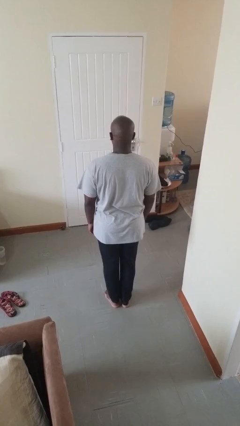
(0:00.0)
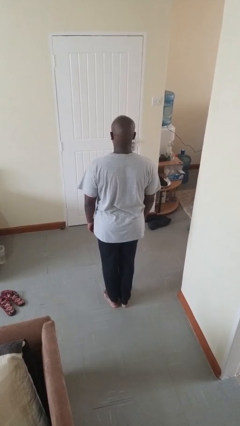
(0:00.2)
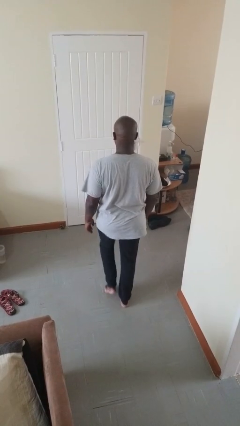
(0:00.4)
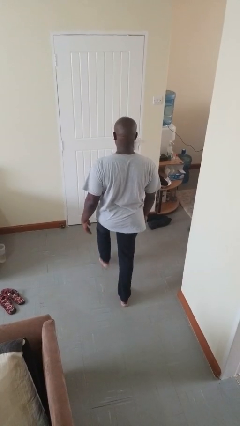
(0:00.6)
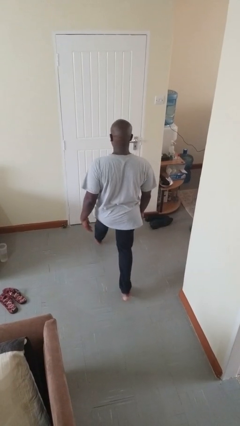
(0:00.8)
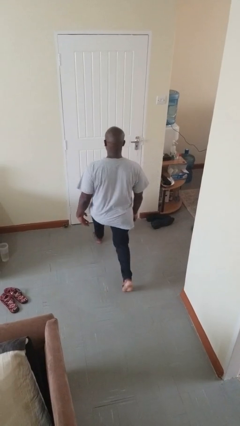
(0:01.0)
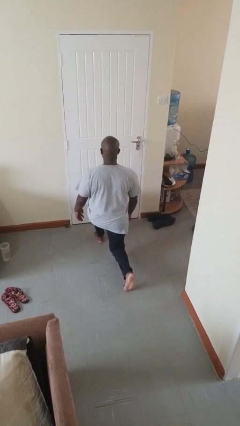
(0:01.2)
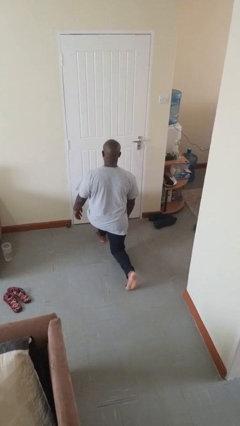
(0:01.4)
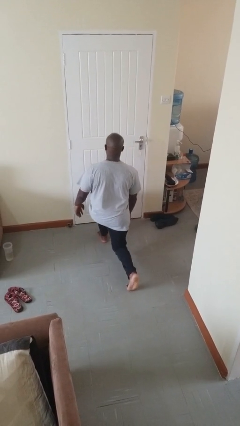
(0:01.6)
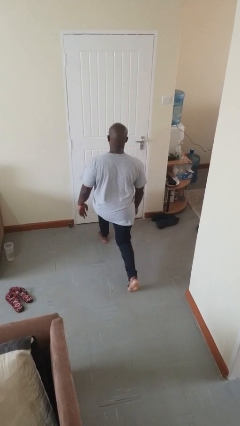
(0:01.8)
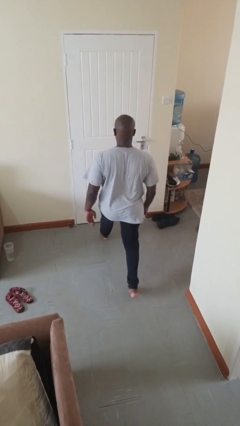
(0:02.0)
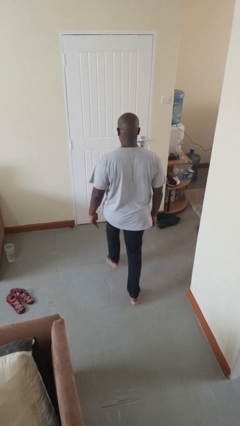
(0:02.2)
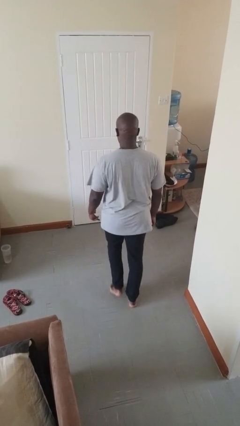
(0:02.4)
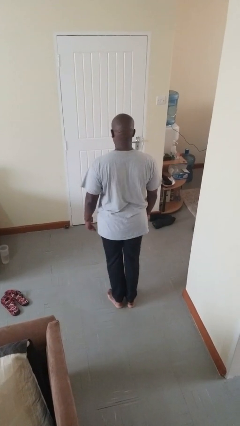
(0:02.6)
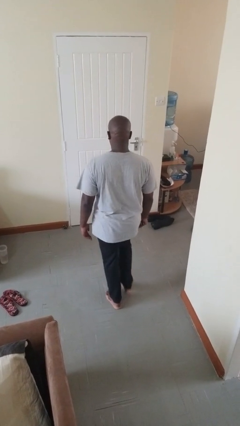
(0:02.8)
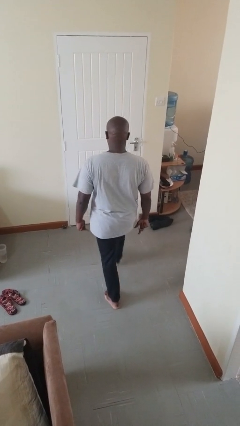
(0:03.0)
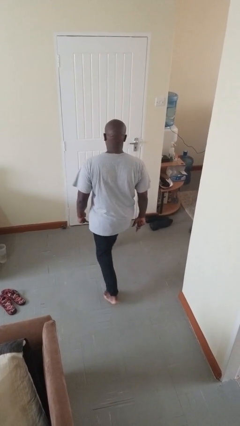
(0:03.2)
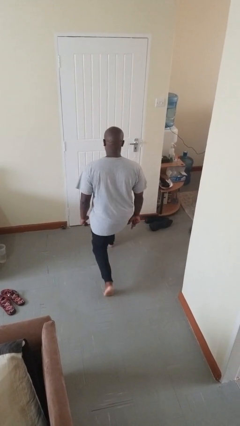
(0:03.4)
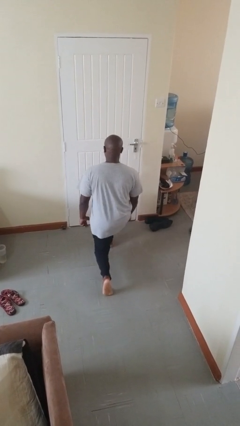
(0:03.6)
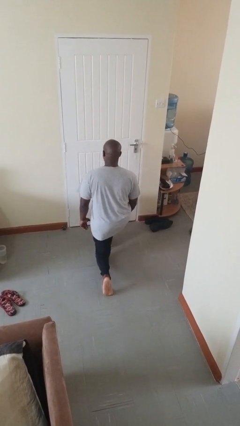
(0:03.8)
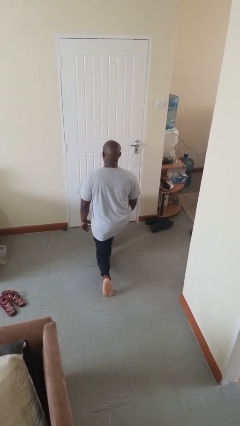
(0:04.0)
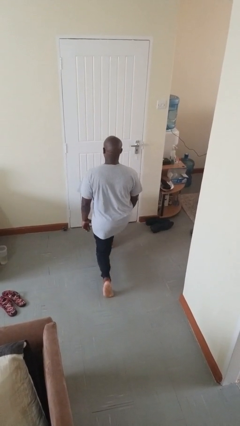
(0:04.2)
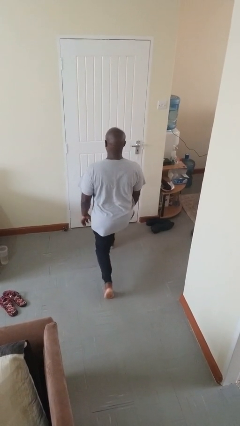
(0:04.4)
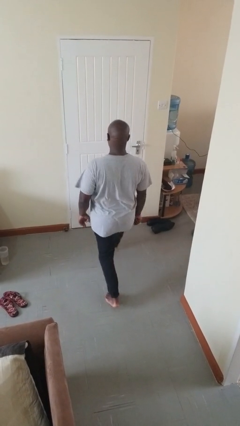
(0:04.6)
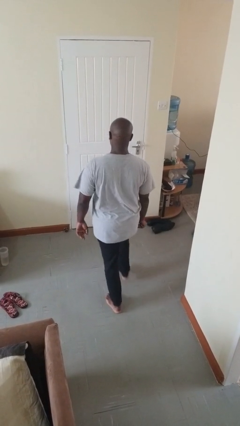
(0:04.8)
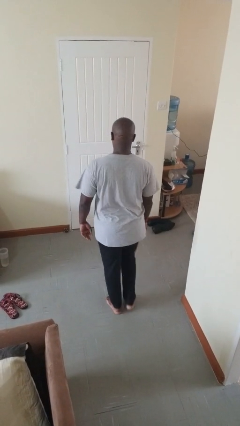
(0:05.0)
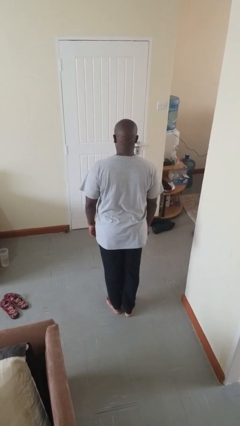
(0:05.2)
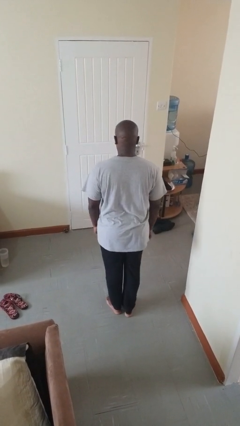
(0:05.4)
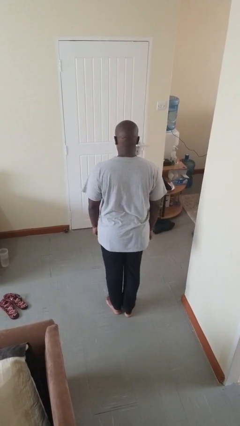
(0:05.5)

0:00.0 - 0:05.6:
person exercises with lunges

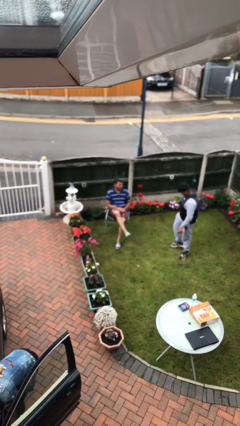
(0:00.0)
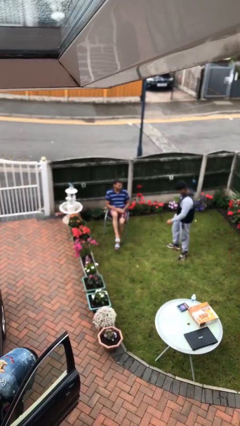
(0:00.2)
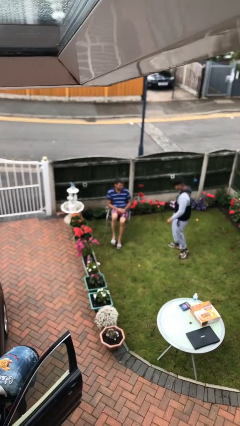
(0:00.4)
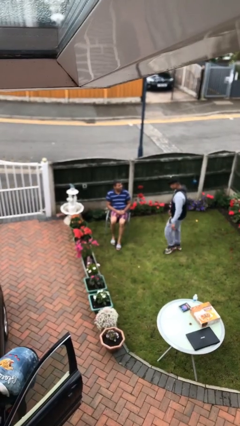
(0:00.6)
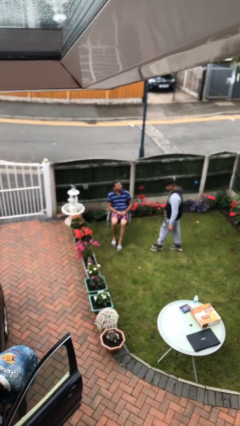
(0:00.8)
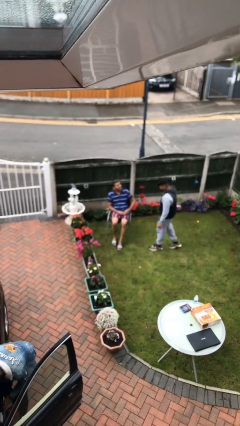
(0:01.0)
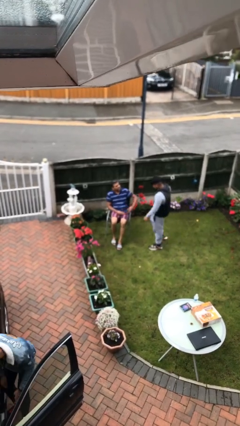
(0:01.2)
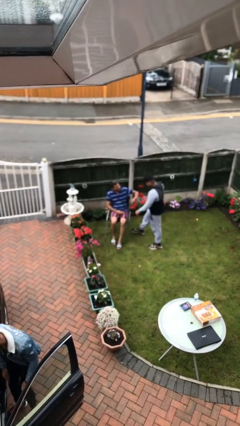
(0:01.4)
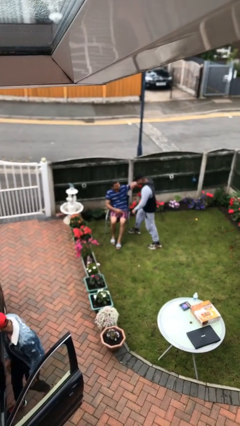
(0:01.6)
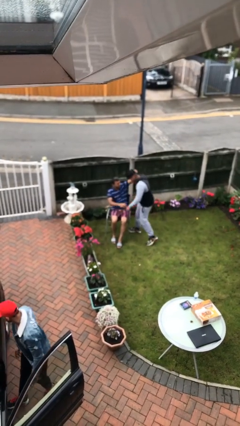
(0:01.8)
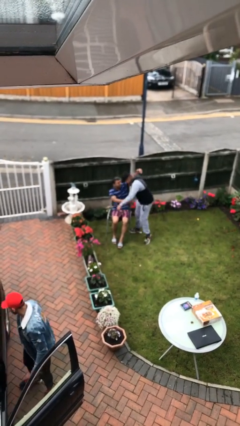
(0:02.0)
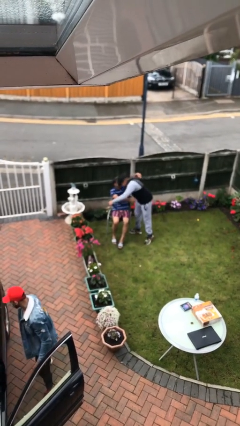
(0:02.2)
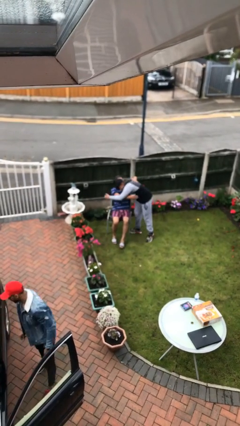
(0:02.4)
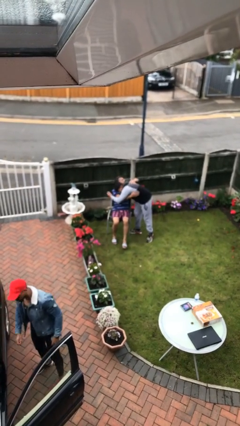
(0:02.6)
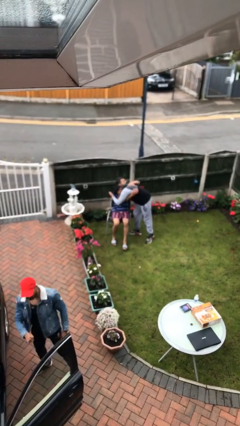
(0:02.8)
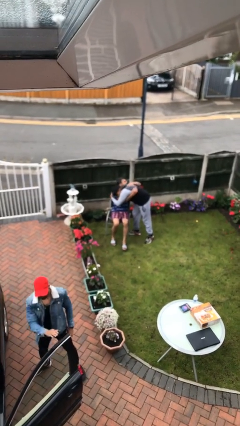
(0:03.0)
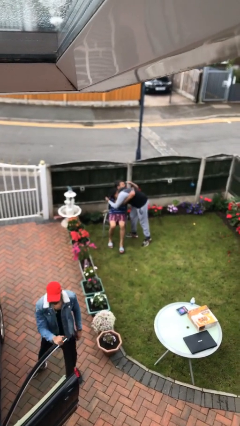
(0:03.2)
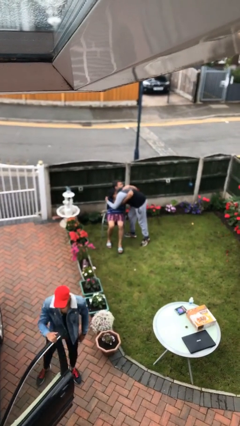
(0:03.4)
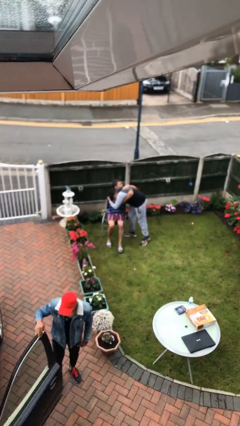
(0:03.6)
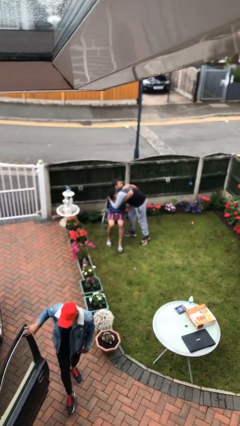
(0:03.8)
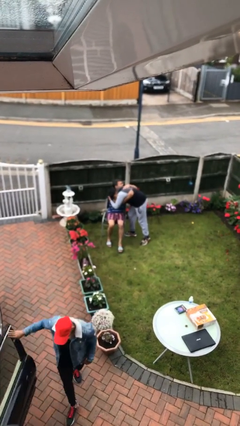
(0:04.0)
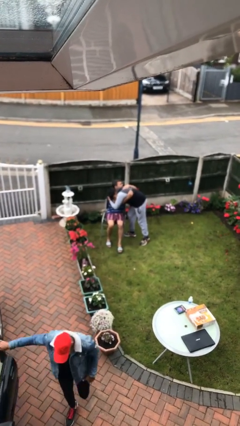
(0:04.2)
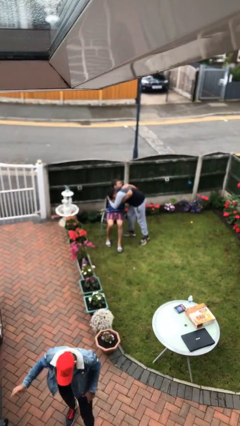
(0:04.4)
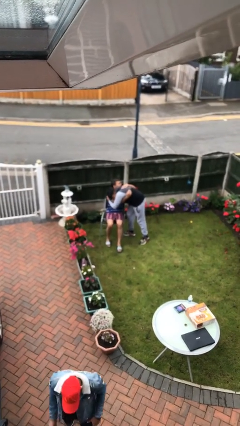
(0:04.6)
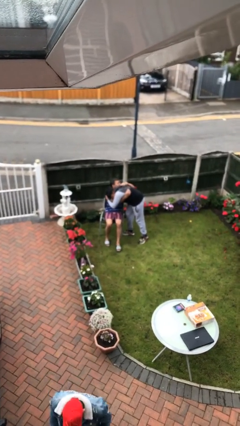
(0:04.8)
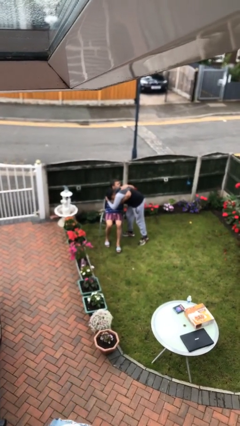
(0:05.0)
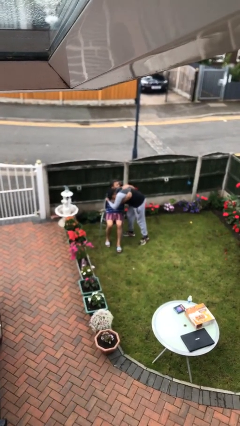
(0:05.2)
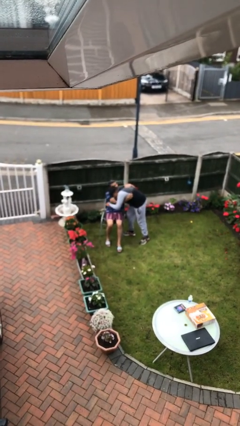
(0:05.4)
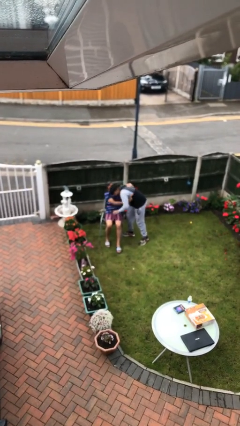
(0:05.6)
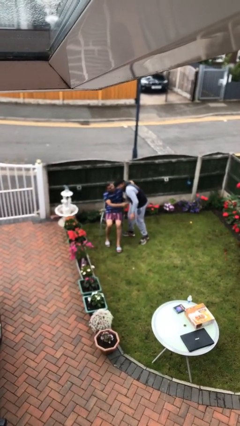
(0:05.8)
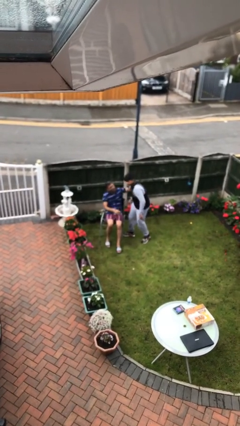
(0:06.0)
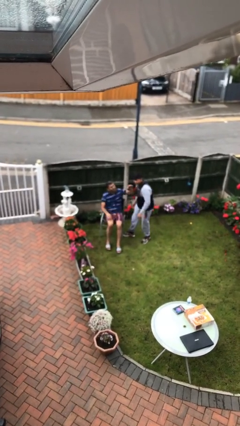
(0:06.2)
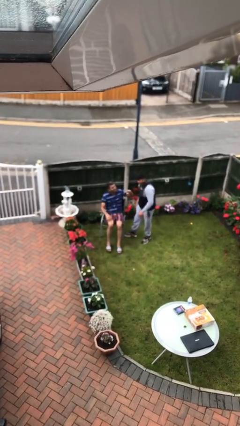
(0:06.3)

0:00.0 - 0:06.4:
person embraces person

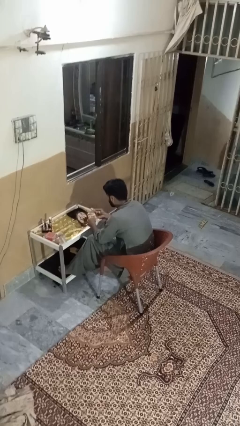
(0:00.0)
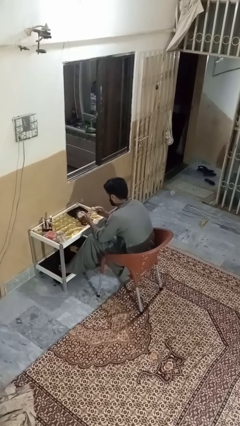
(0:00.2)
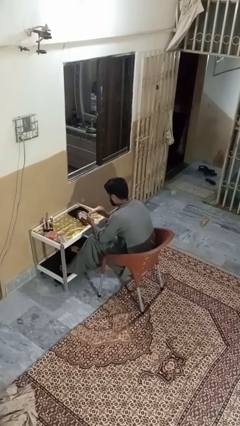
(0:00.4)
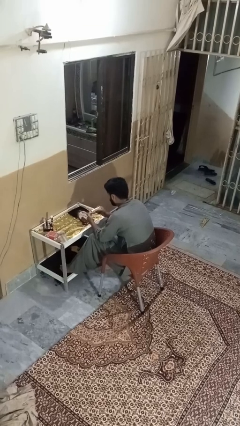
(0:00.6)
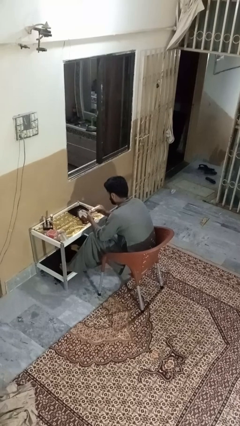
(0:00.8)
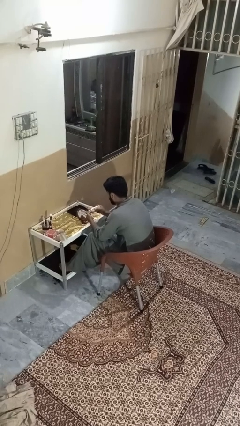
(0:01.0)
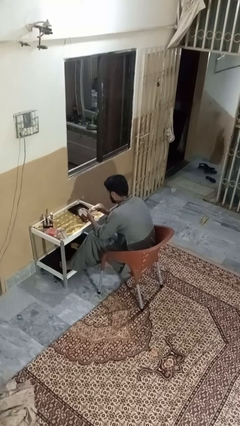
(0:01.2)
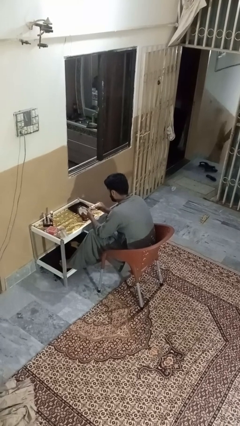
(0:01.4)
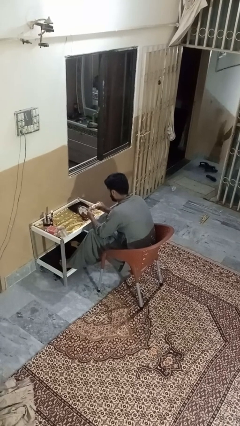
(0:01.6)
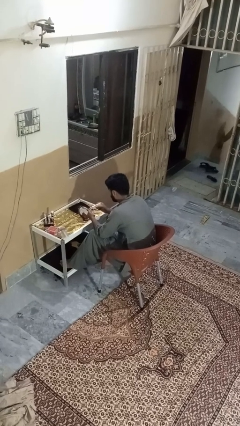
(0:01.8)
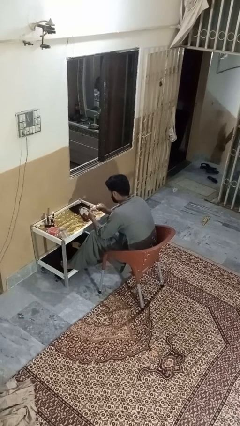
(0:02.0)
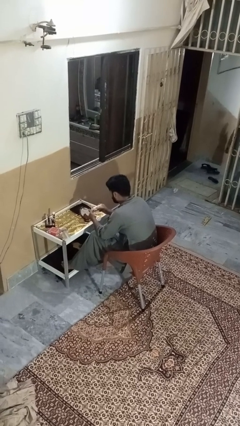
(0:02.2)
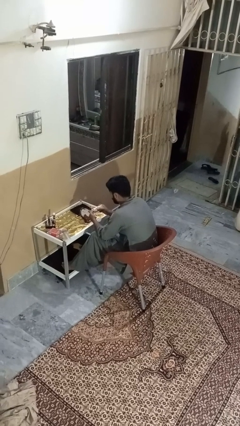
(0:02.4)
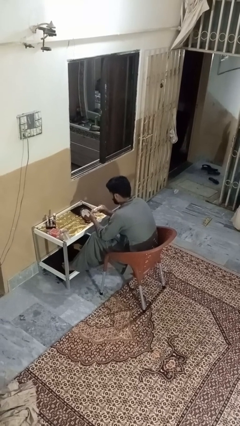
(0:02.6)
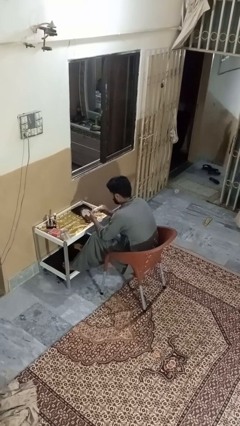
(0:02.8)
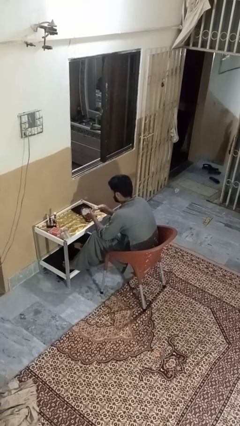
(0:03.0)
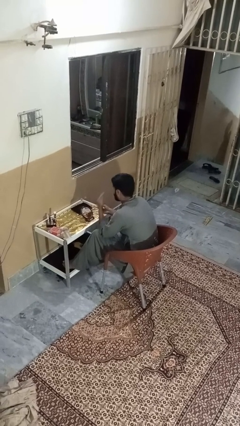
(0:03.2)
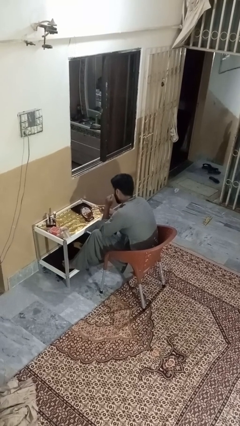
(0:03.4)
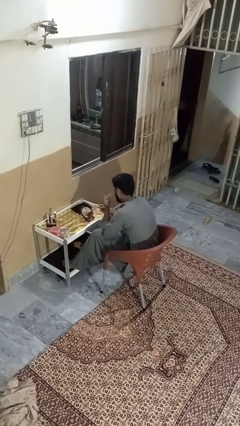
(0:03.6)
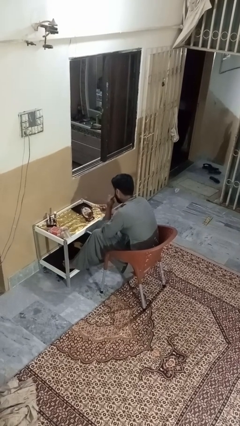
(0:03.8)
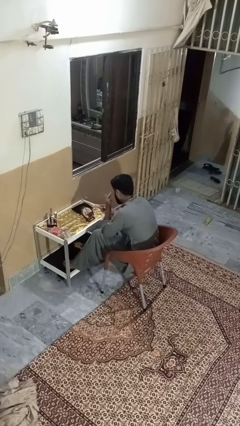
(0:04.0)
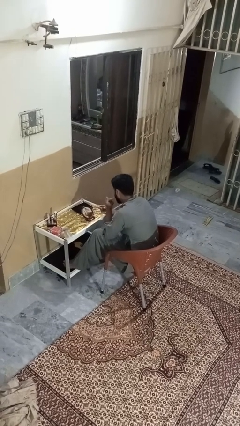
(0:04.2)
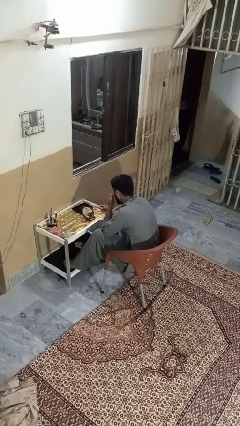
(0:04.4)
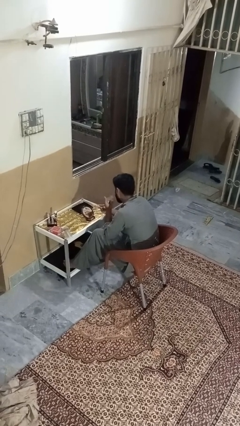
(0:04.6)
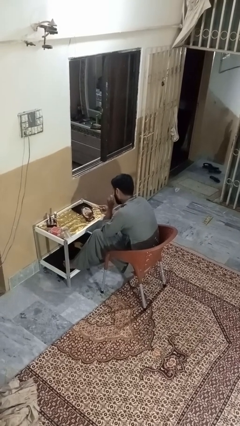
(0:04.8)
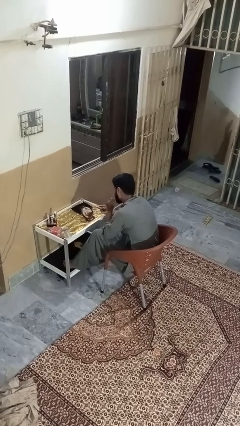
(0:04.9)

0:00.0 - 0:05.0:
person applies foundation makeup

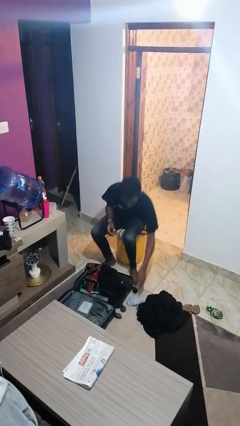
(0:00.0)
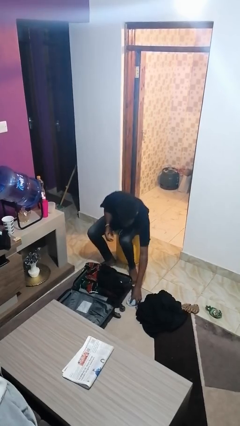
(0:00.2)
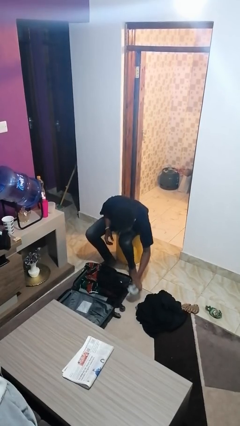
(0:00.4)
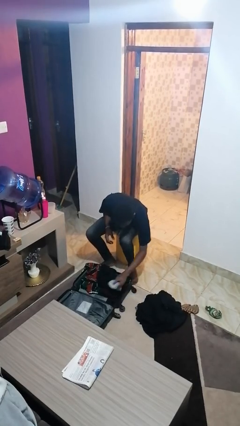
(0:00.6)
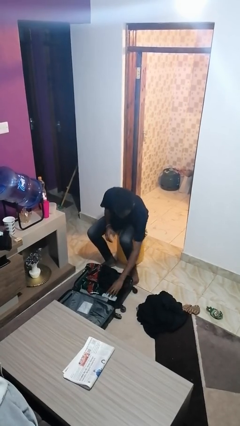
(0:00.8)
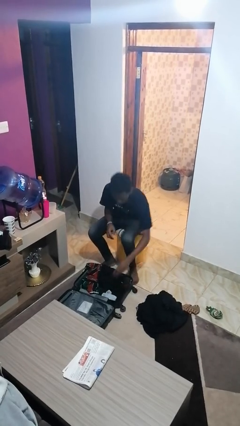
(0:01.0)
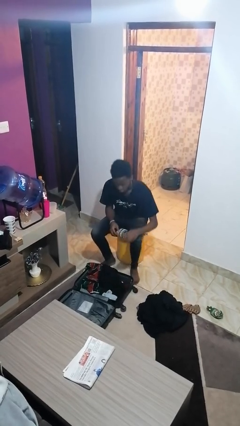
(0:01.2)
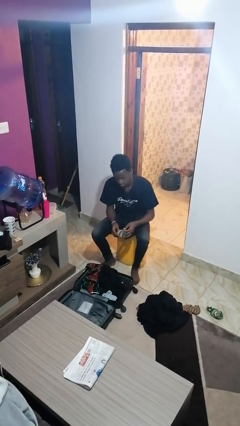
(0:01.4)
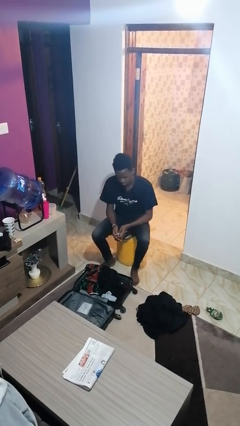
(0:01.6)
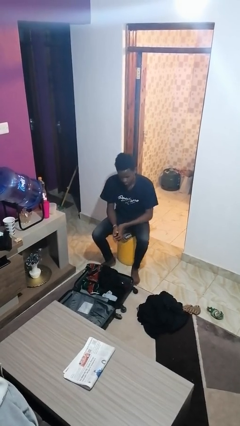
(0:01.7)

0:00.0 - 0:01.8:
person loads clothes into suitcase
